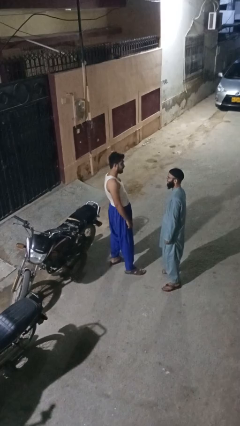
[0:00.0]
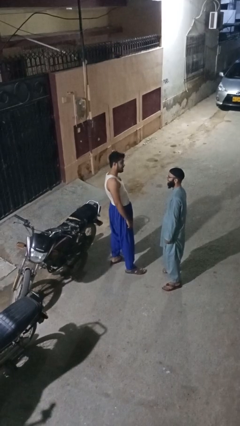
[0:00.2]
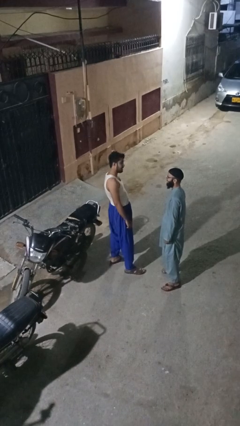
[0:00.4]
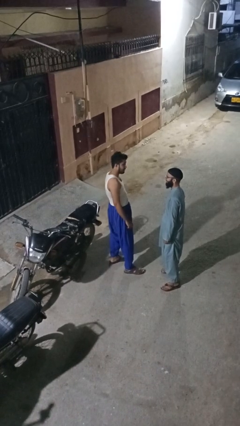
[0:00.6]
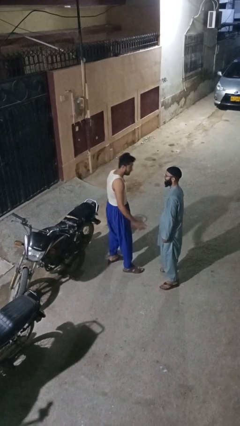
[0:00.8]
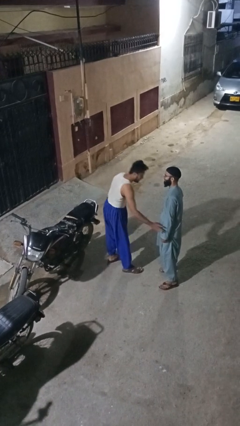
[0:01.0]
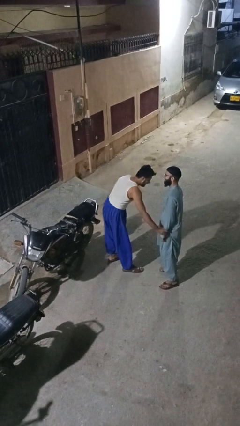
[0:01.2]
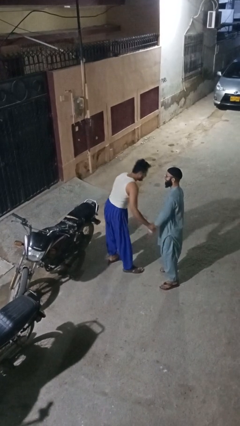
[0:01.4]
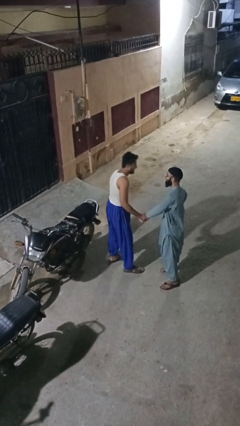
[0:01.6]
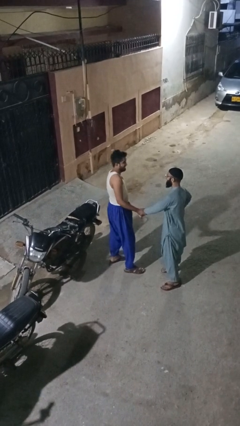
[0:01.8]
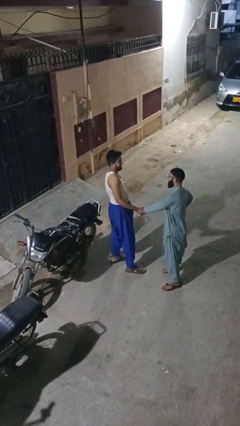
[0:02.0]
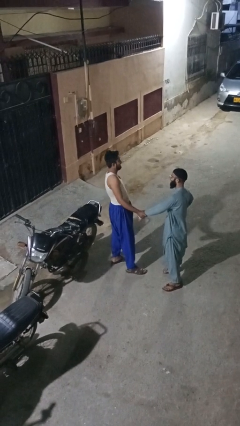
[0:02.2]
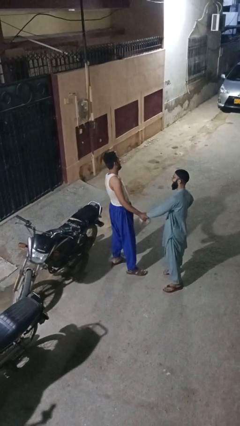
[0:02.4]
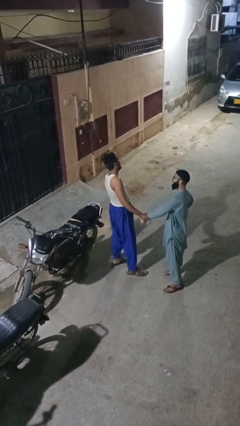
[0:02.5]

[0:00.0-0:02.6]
person grabs person by forearm

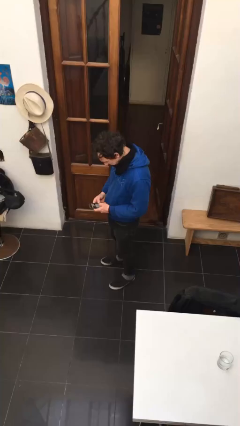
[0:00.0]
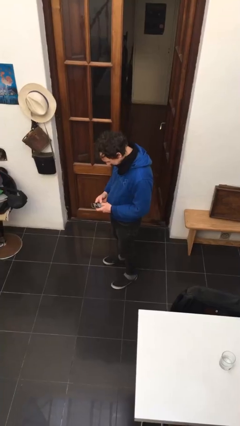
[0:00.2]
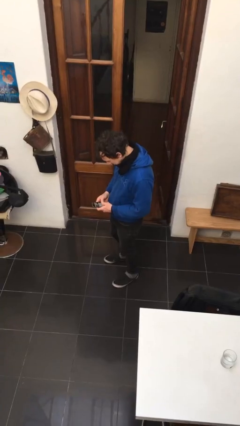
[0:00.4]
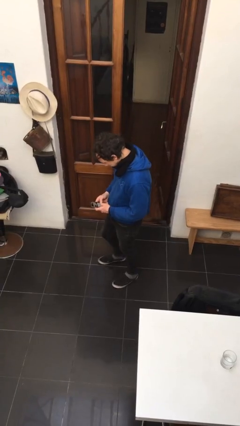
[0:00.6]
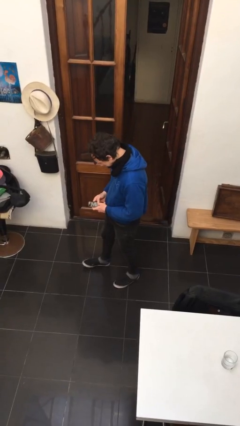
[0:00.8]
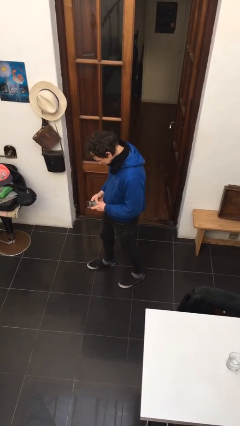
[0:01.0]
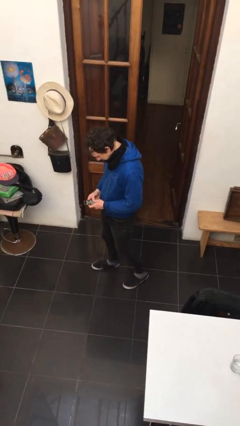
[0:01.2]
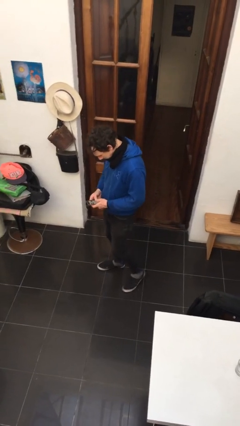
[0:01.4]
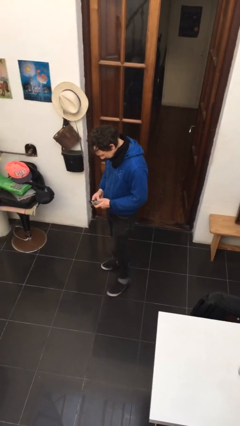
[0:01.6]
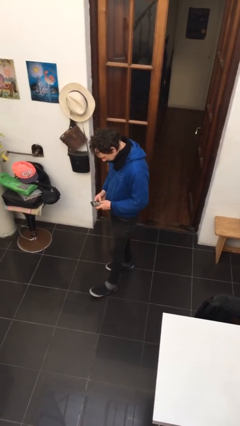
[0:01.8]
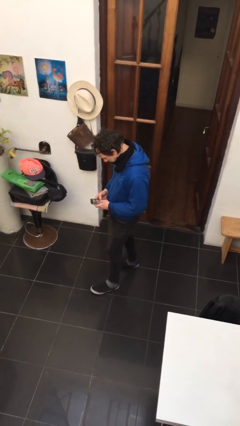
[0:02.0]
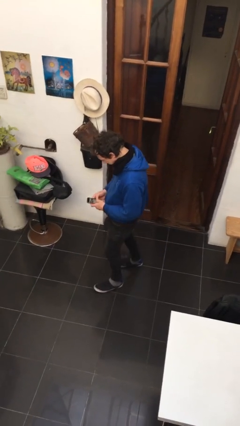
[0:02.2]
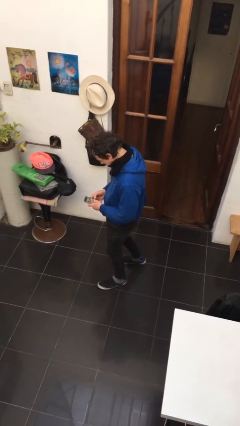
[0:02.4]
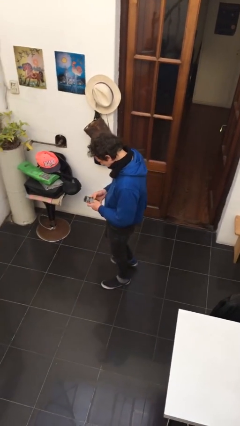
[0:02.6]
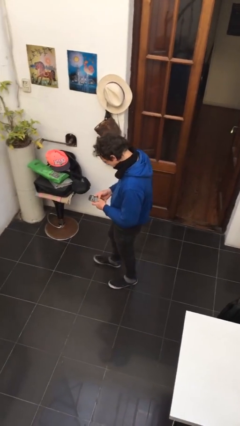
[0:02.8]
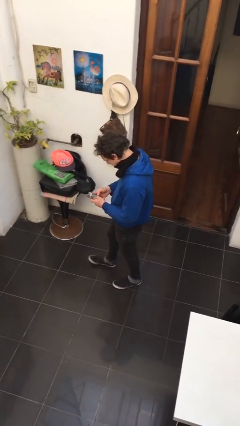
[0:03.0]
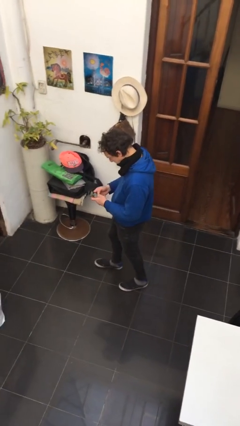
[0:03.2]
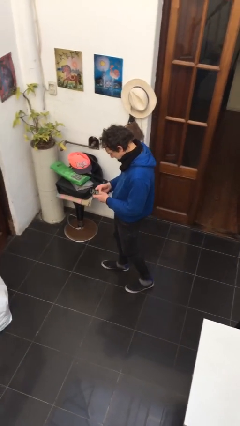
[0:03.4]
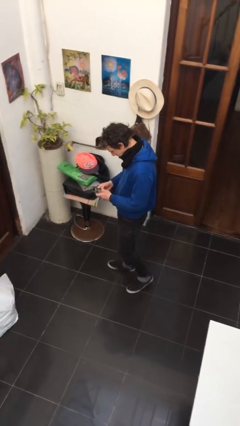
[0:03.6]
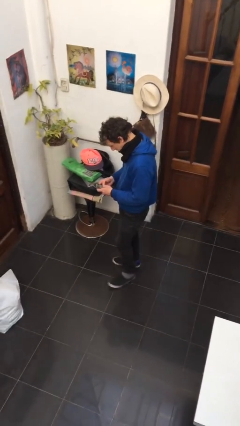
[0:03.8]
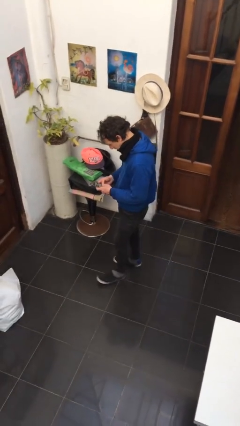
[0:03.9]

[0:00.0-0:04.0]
person texts on phone

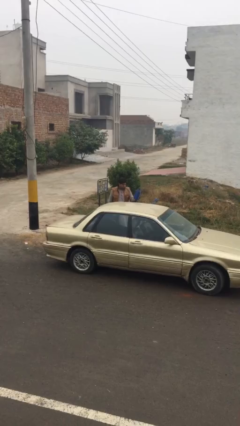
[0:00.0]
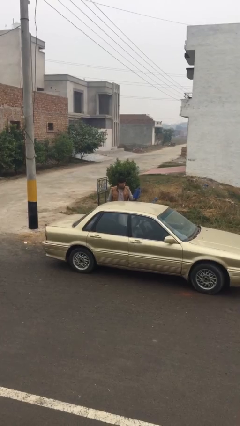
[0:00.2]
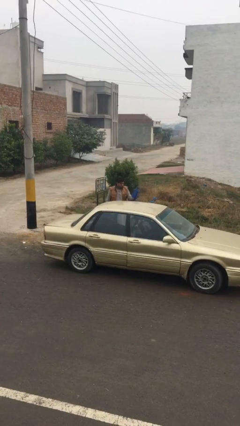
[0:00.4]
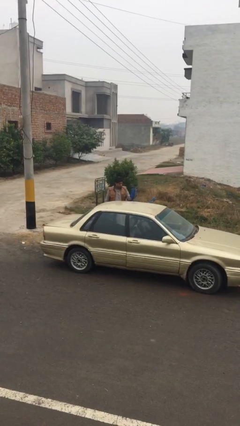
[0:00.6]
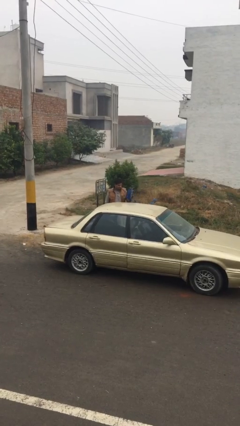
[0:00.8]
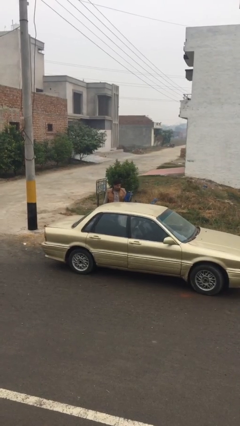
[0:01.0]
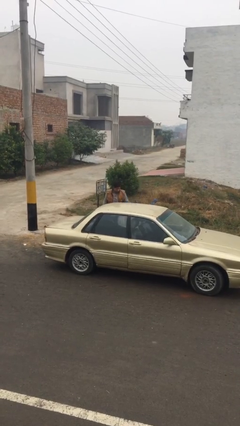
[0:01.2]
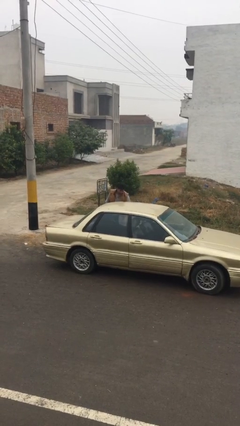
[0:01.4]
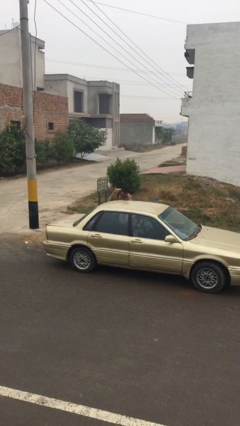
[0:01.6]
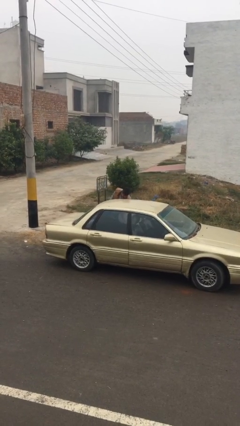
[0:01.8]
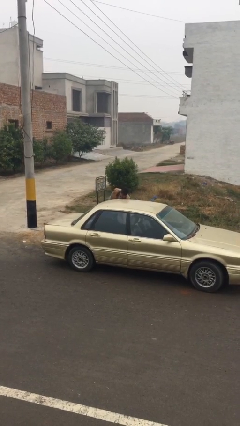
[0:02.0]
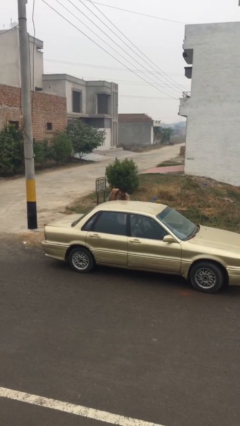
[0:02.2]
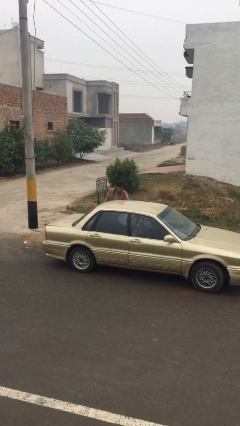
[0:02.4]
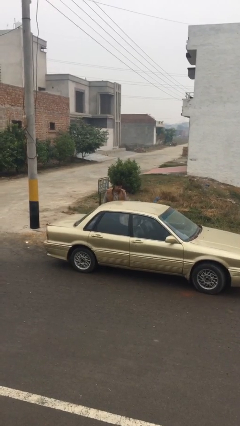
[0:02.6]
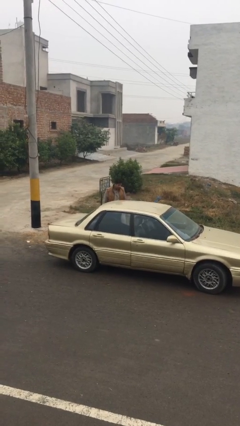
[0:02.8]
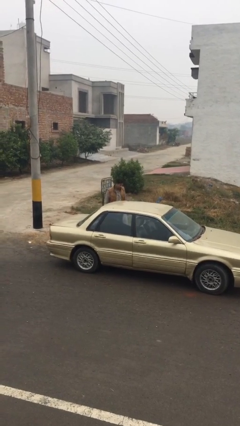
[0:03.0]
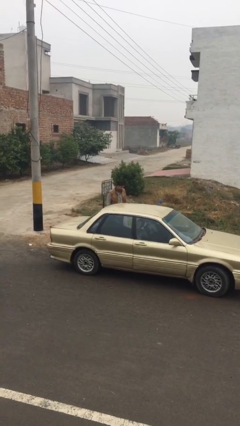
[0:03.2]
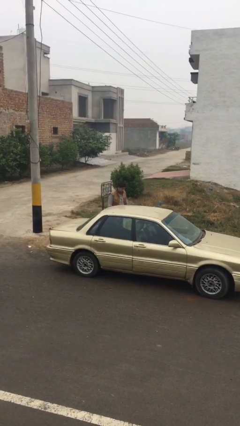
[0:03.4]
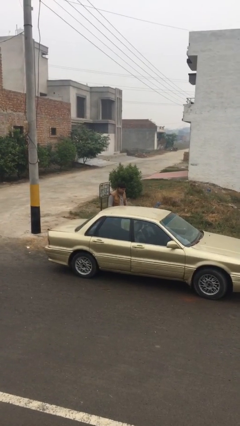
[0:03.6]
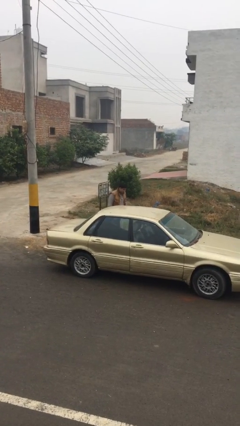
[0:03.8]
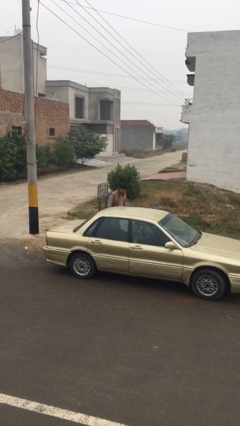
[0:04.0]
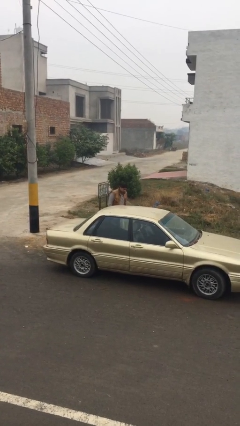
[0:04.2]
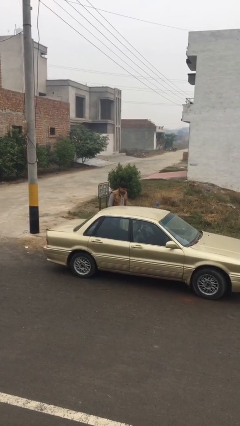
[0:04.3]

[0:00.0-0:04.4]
person loads car

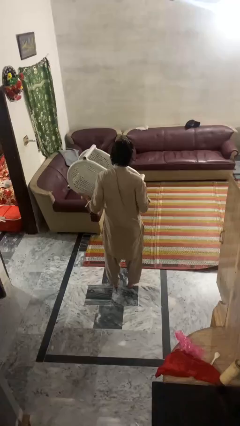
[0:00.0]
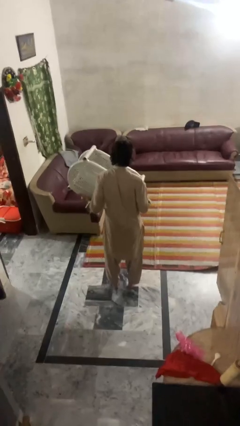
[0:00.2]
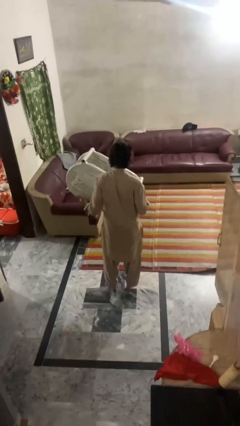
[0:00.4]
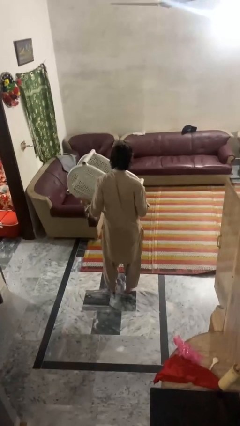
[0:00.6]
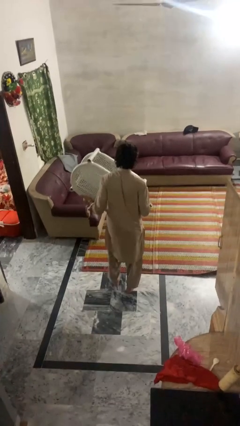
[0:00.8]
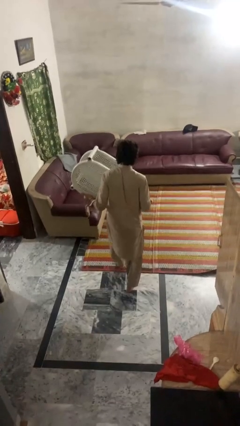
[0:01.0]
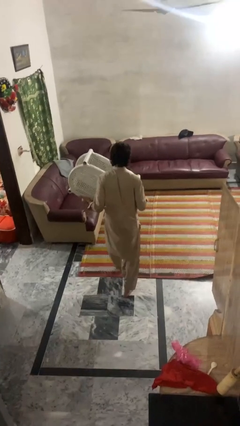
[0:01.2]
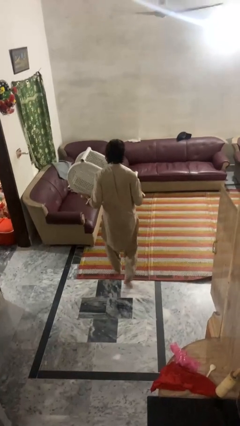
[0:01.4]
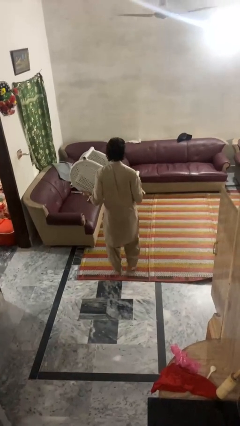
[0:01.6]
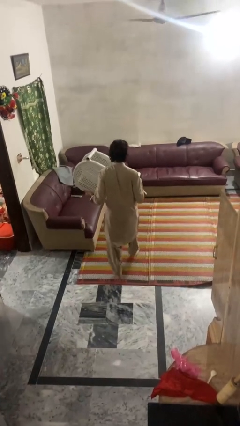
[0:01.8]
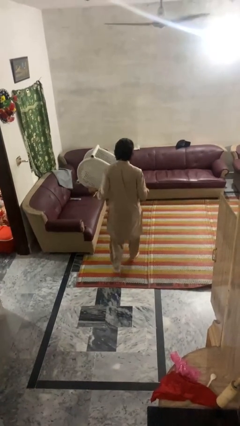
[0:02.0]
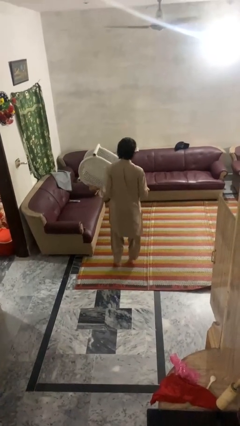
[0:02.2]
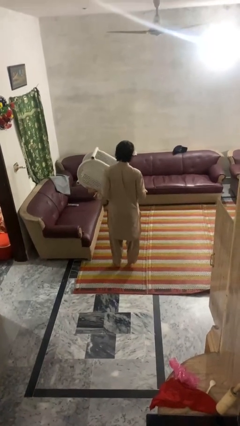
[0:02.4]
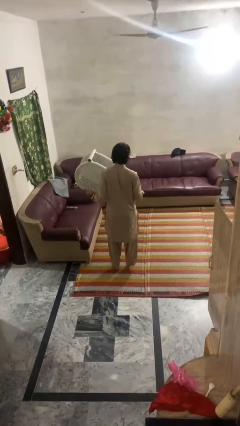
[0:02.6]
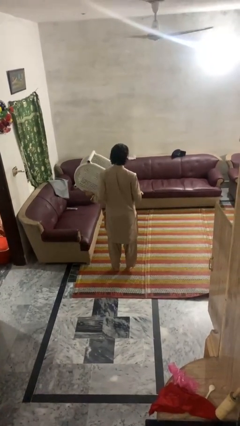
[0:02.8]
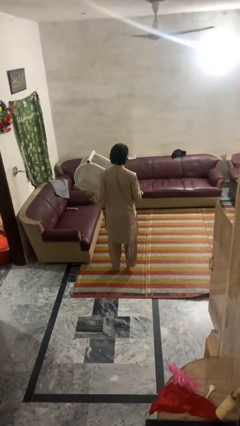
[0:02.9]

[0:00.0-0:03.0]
person carries groceries

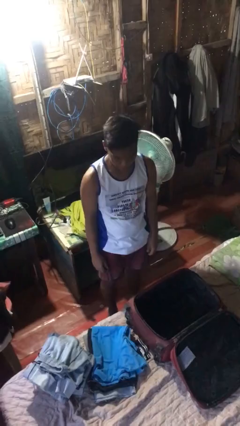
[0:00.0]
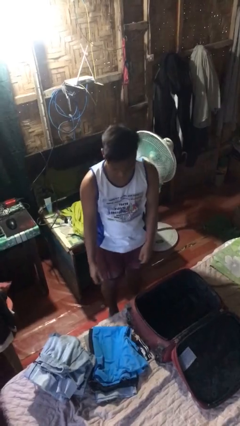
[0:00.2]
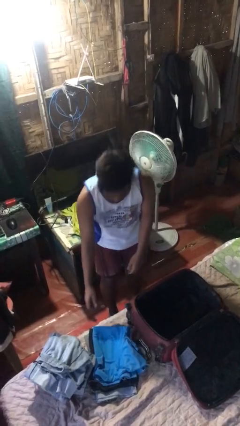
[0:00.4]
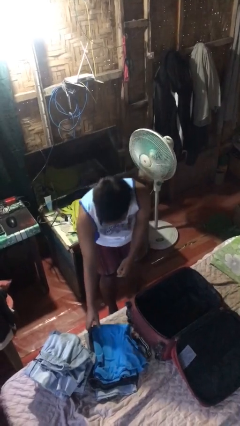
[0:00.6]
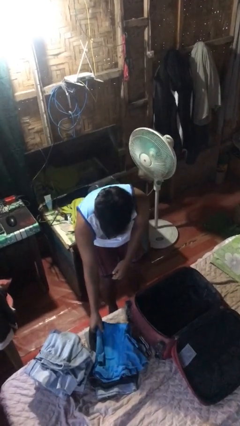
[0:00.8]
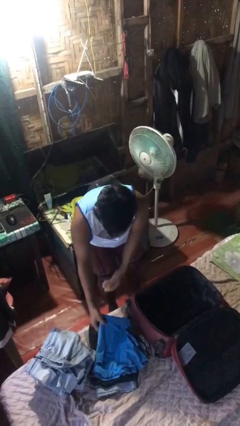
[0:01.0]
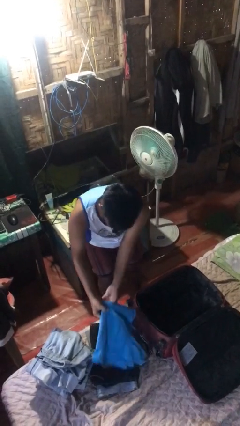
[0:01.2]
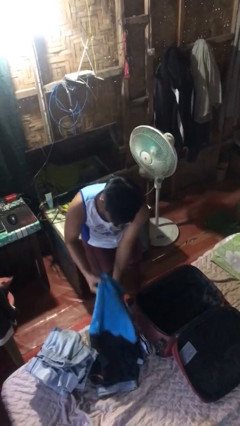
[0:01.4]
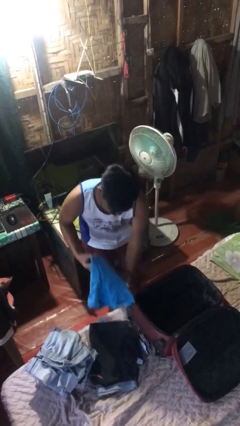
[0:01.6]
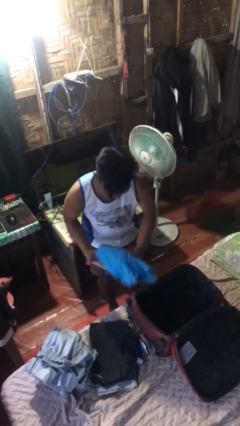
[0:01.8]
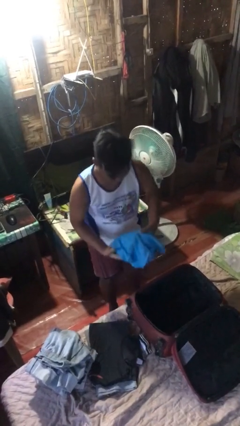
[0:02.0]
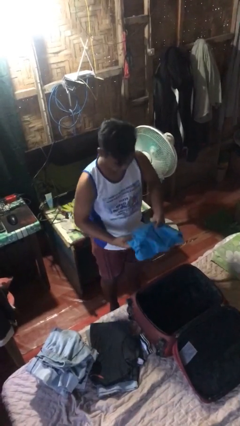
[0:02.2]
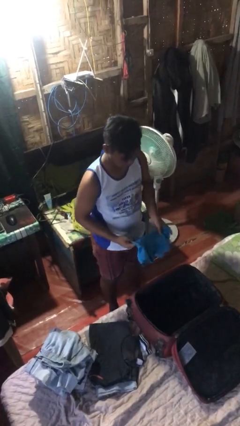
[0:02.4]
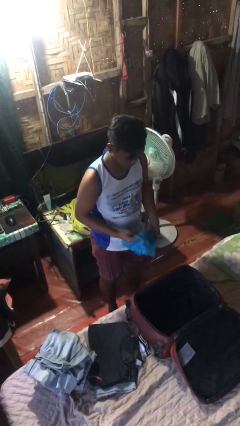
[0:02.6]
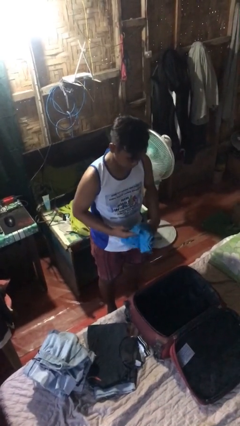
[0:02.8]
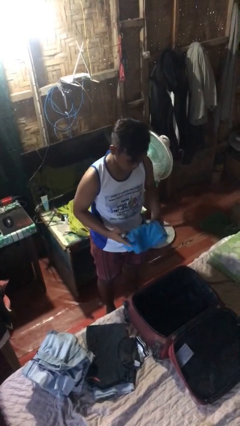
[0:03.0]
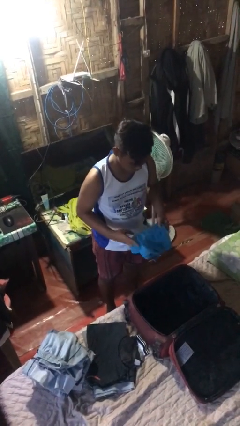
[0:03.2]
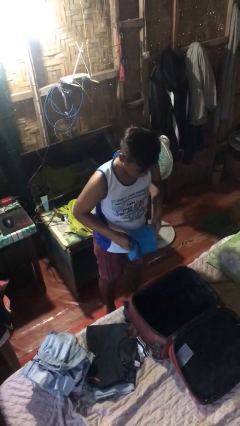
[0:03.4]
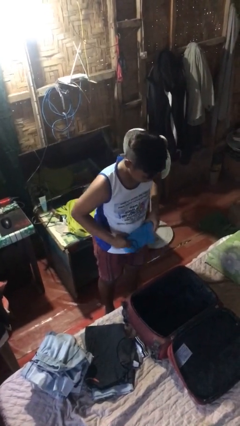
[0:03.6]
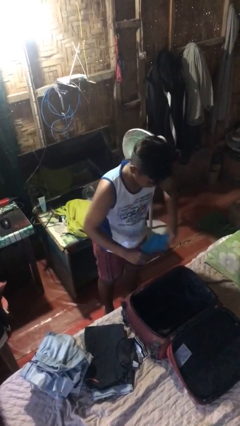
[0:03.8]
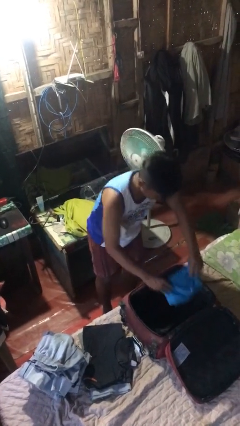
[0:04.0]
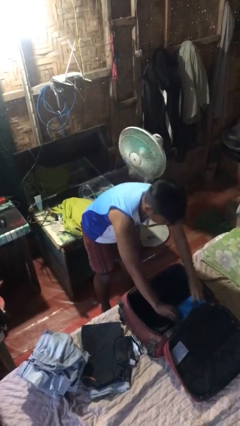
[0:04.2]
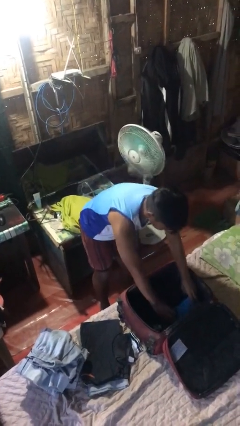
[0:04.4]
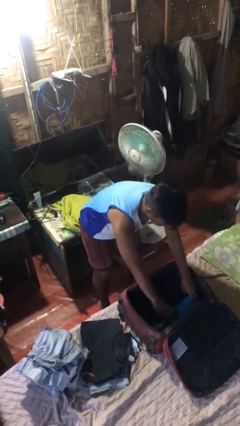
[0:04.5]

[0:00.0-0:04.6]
person loads clothes into suitcase
